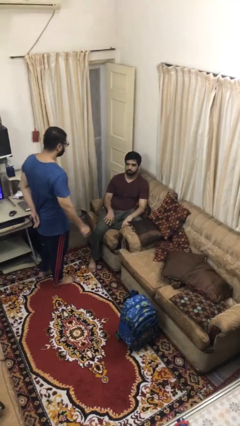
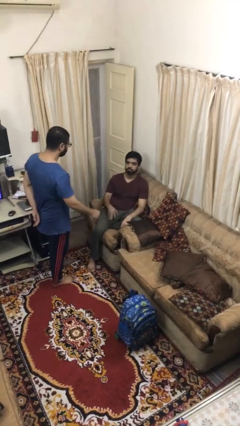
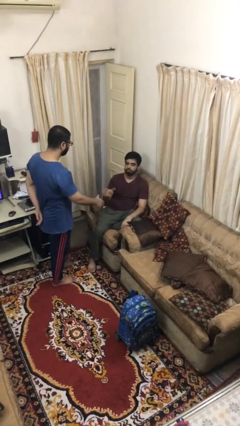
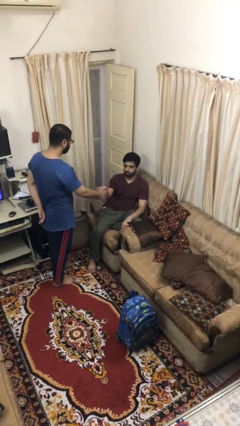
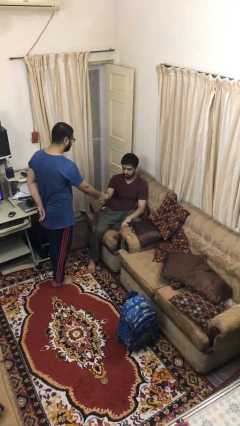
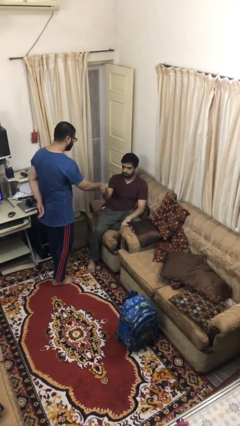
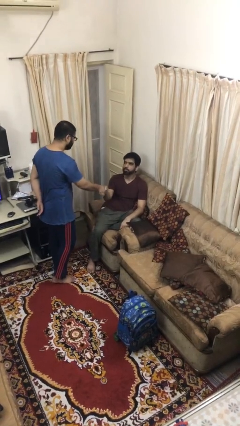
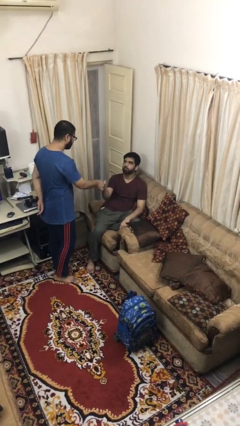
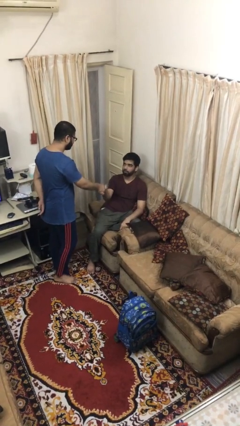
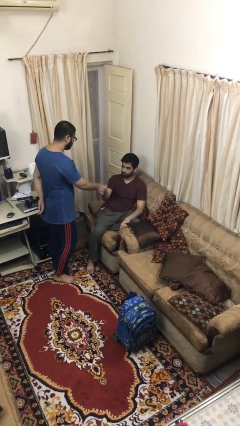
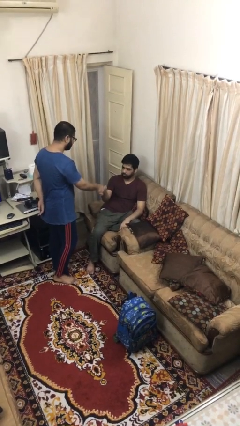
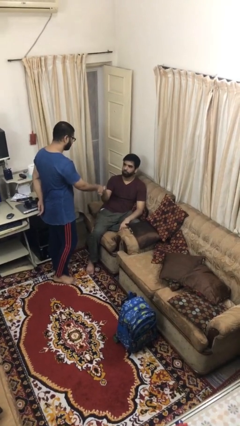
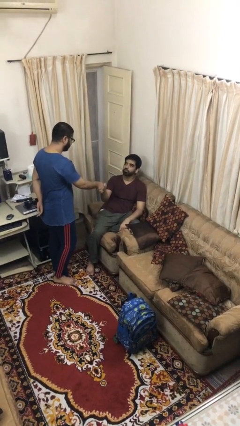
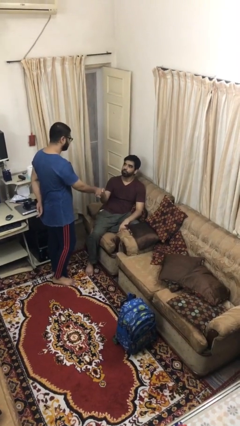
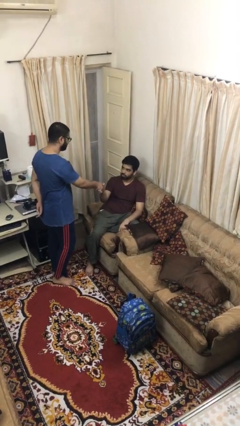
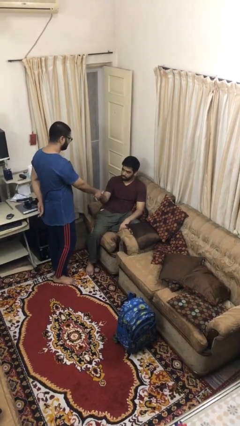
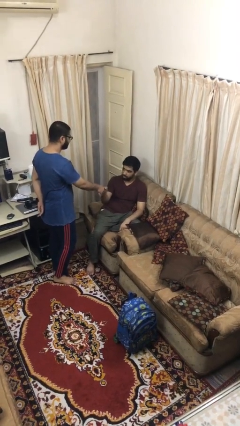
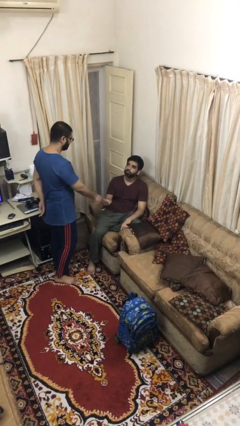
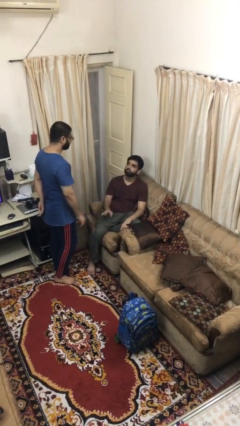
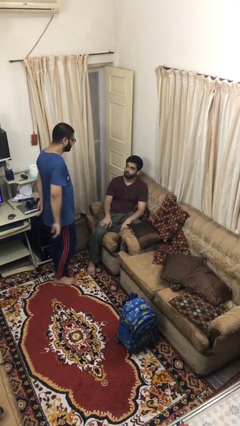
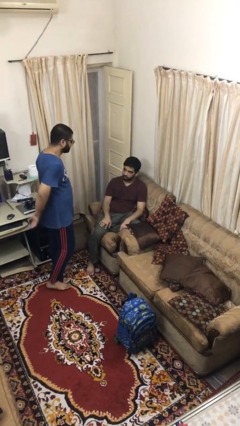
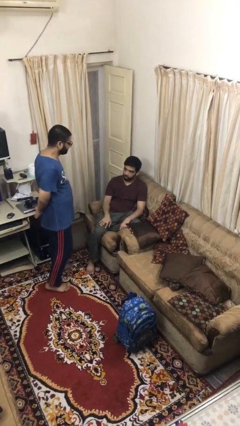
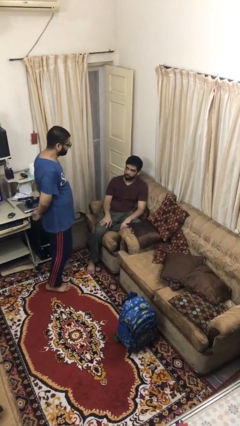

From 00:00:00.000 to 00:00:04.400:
person shakes hand

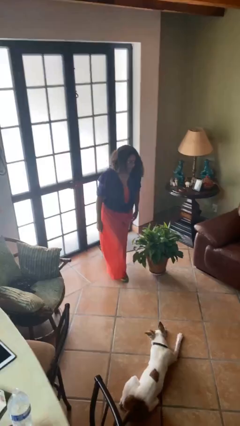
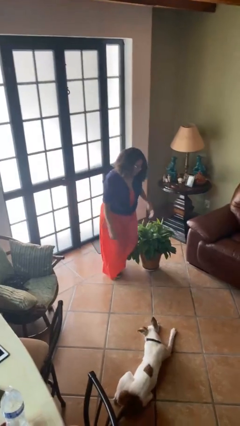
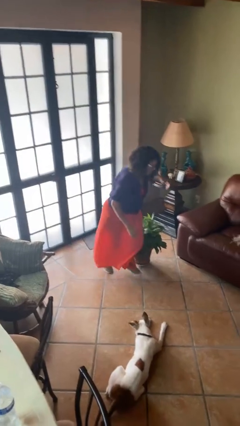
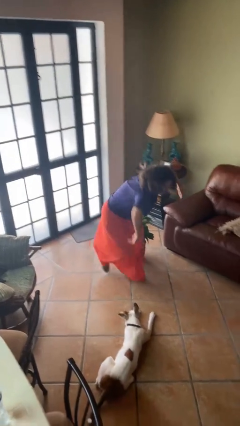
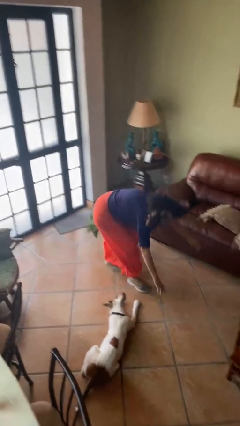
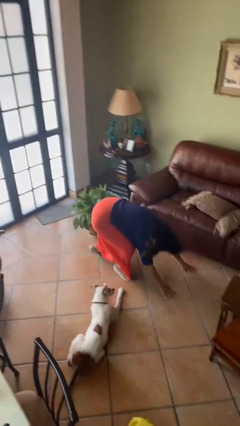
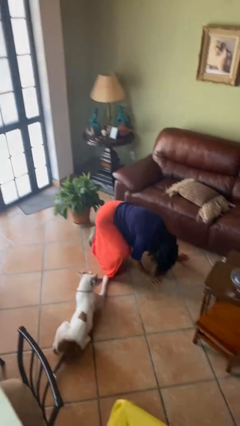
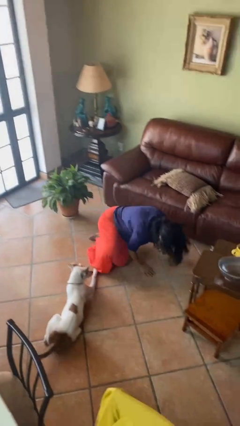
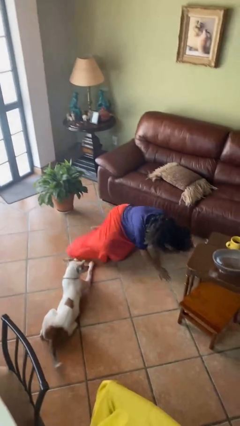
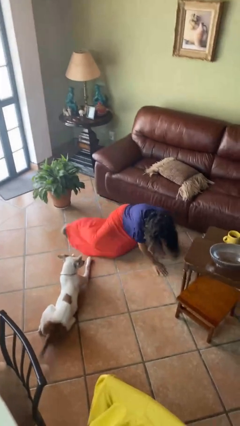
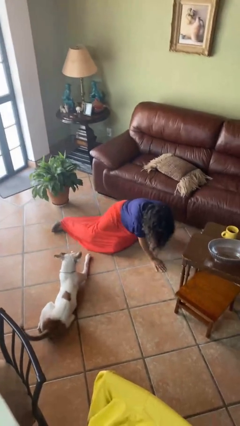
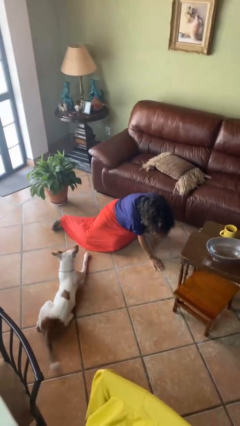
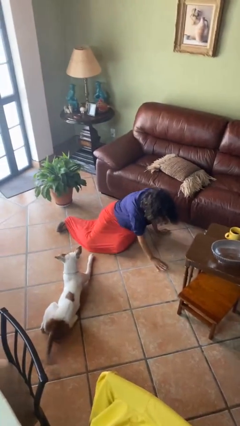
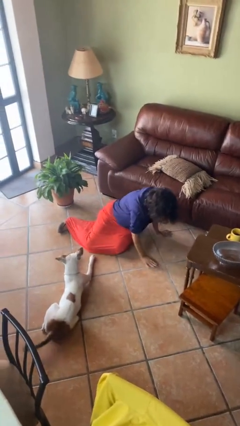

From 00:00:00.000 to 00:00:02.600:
person trips on object on floor

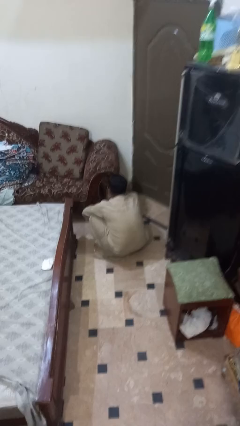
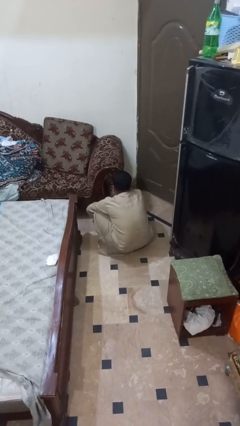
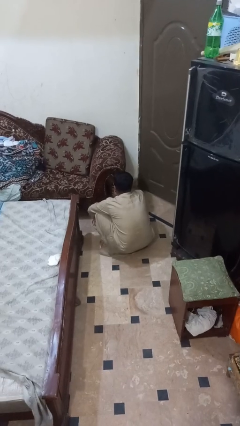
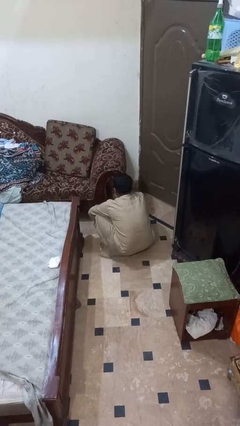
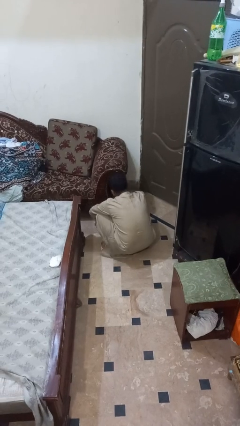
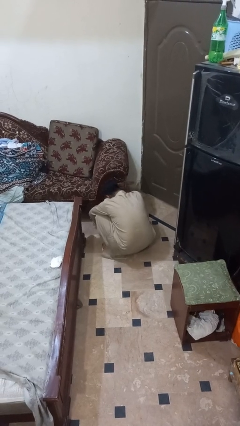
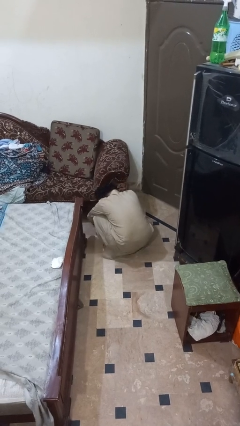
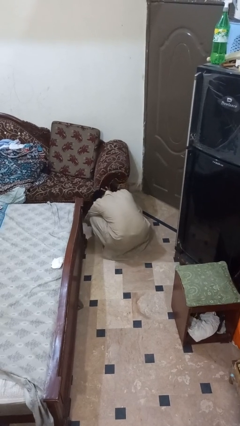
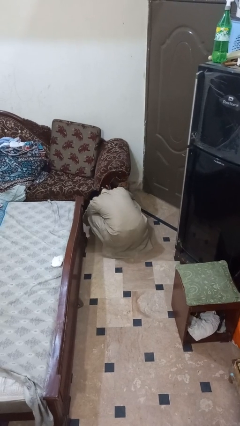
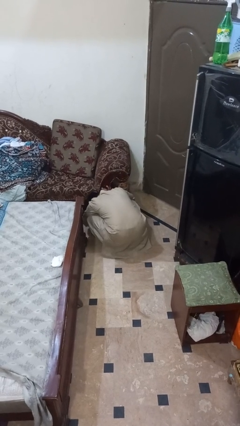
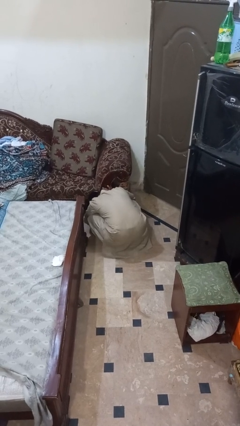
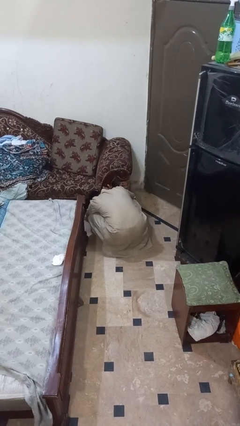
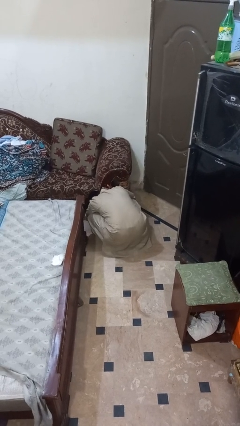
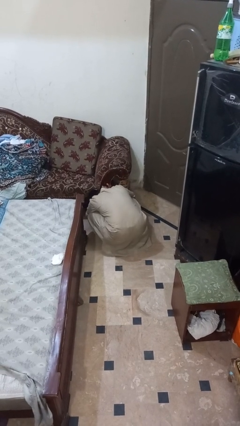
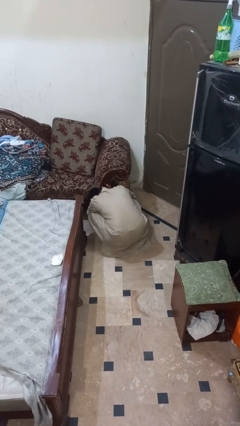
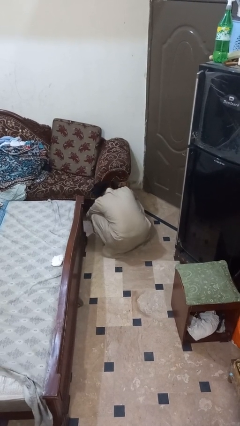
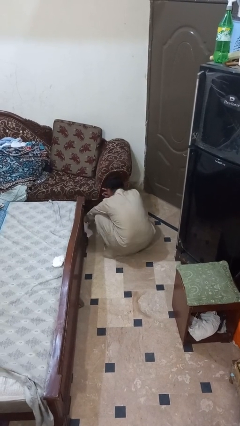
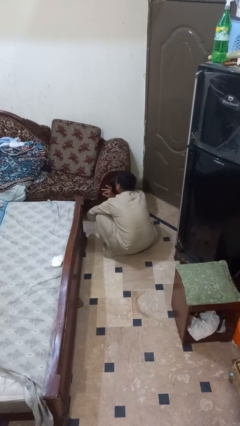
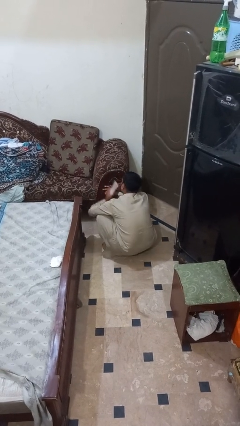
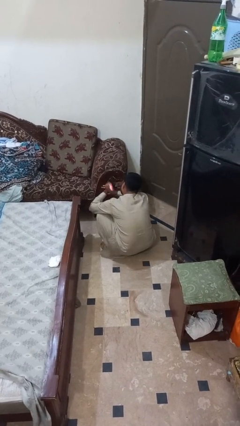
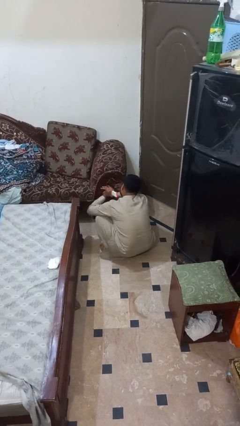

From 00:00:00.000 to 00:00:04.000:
person searches under couch

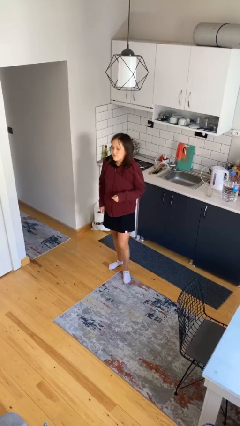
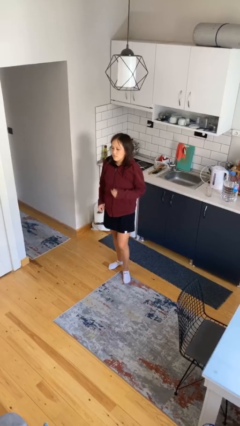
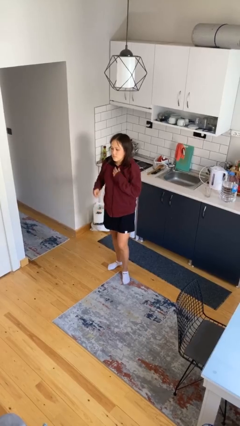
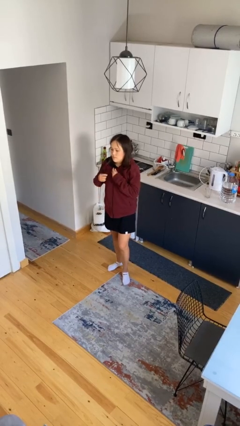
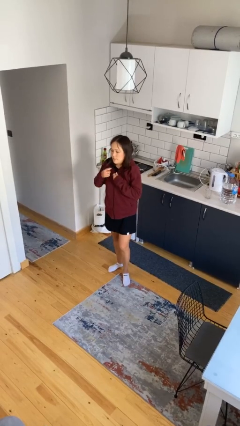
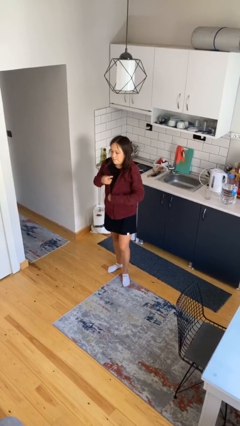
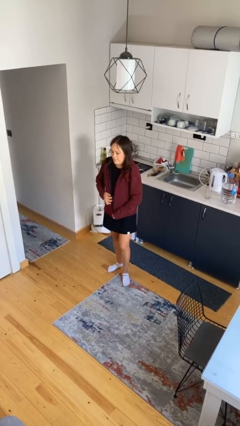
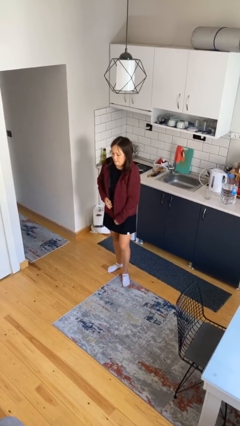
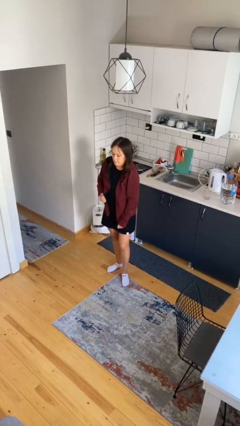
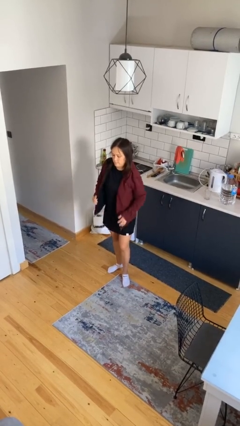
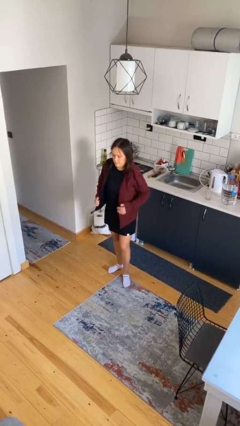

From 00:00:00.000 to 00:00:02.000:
person unzips jacket

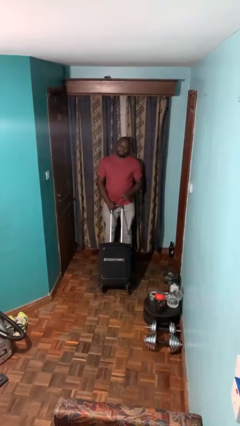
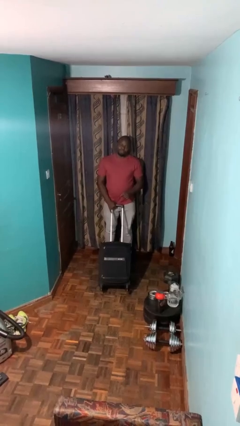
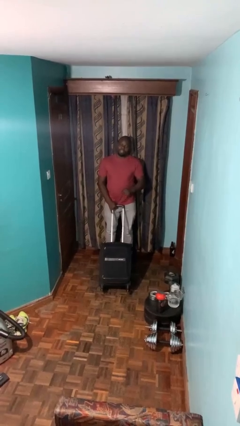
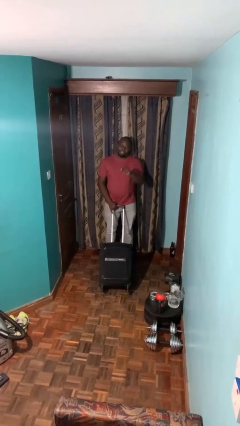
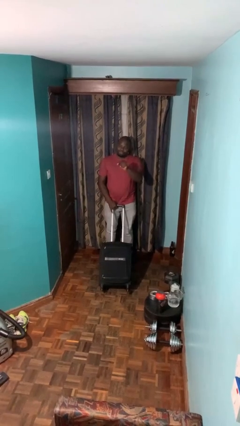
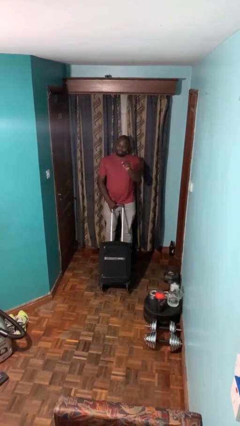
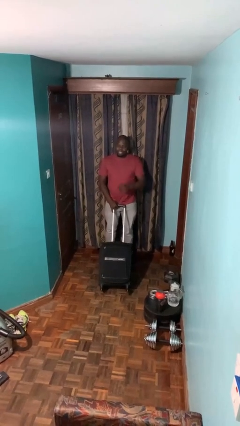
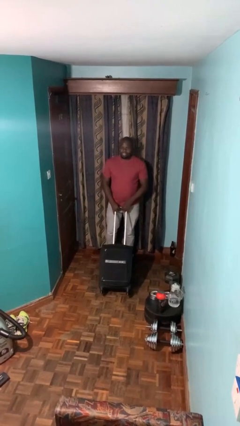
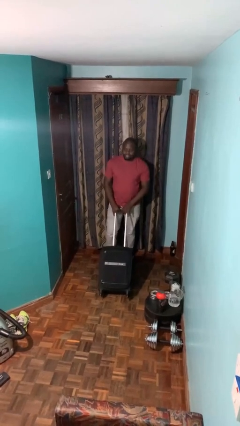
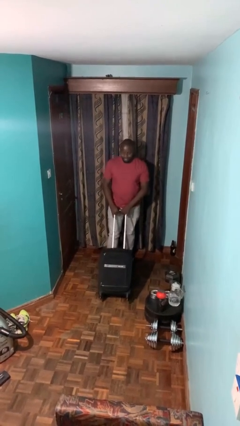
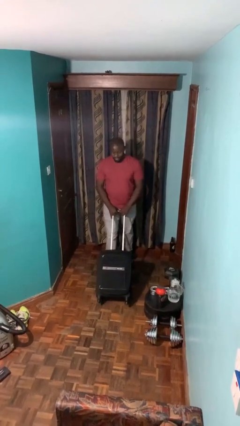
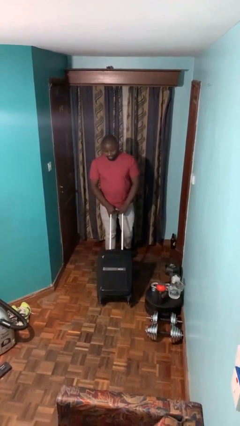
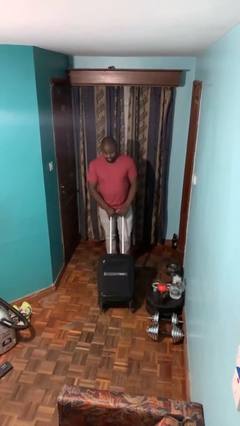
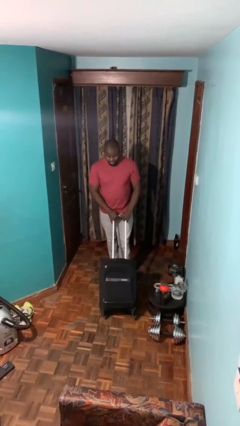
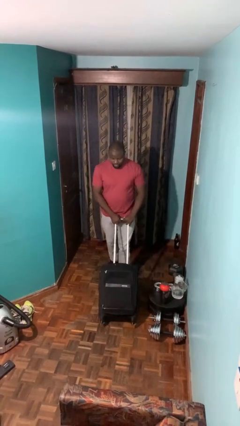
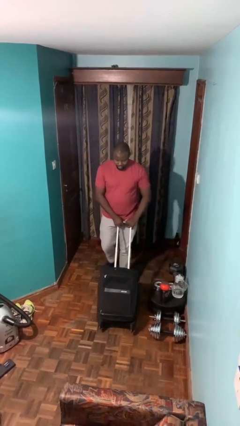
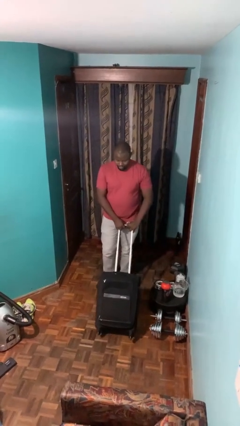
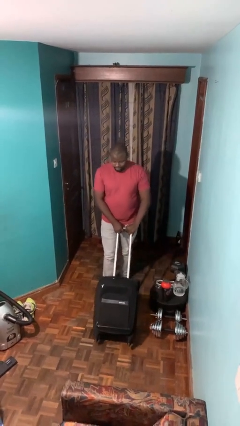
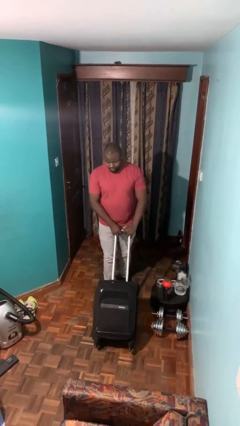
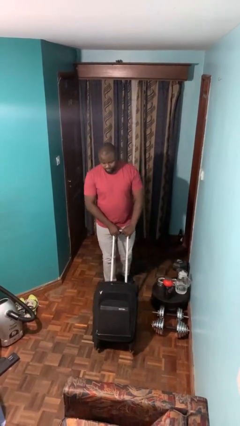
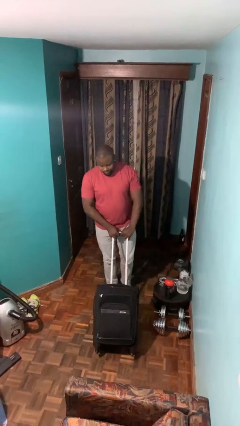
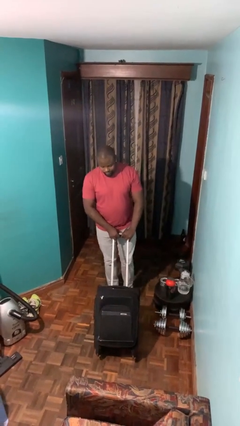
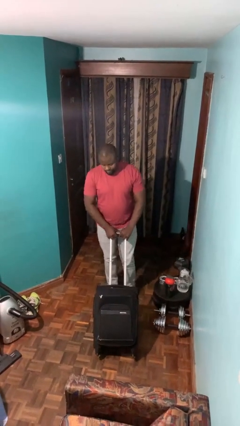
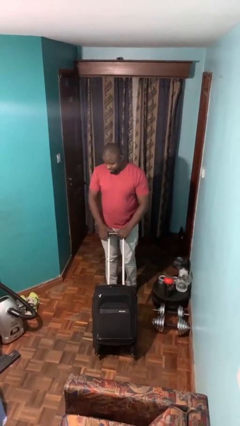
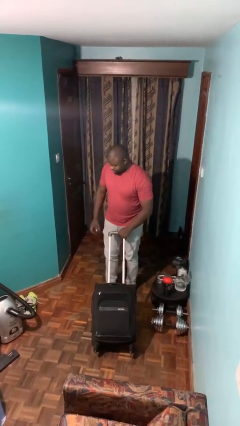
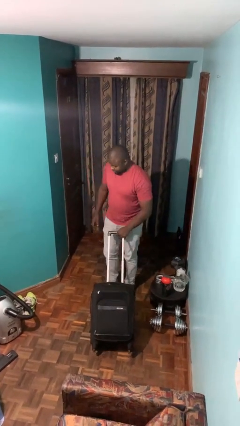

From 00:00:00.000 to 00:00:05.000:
person pushes wheeled cart
